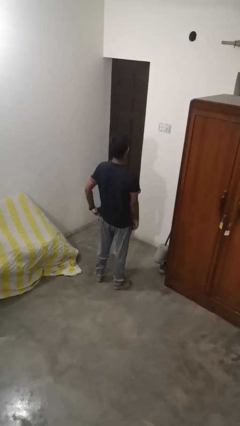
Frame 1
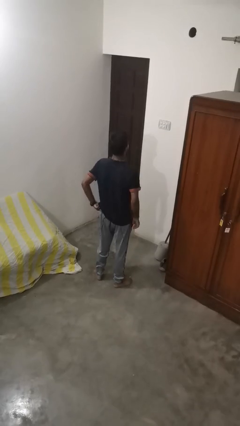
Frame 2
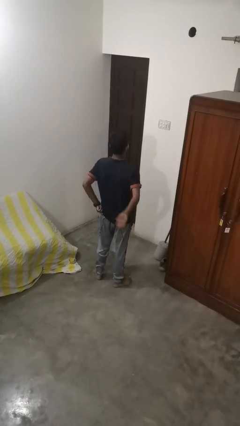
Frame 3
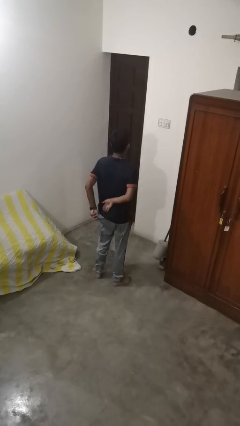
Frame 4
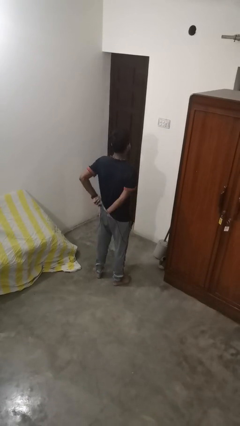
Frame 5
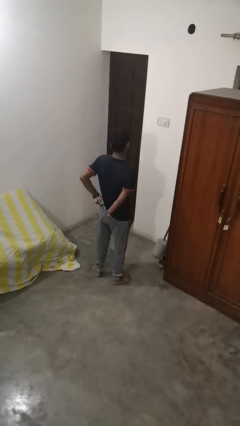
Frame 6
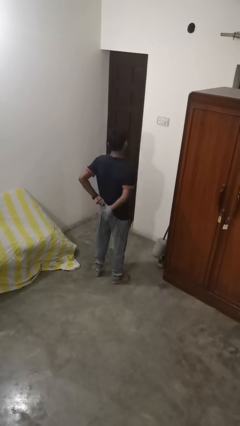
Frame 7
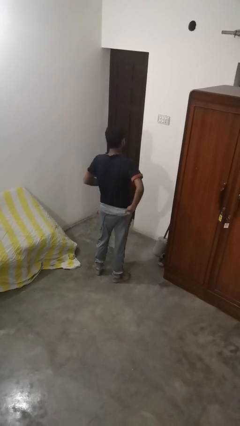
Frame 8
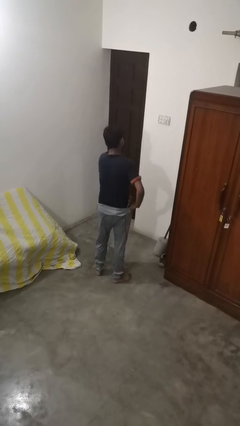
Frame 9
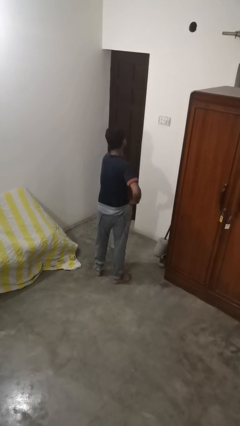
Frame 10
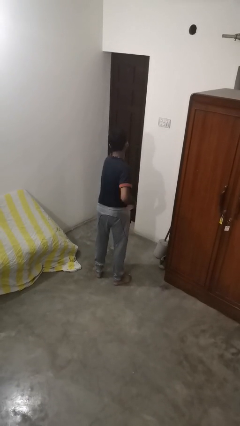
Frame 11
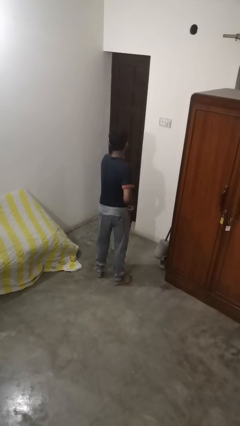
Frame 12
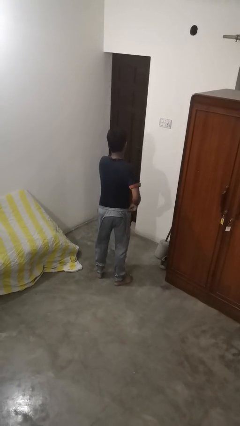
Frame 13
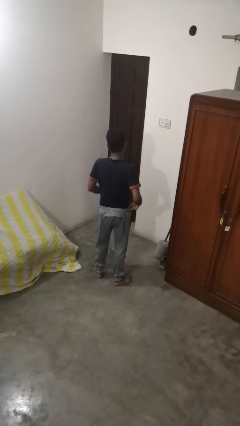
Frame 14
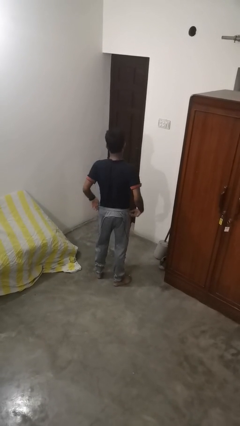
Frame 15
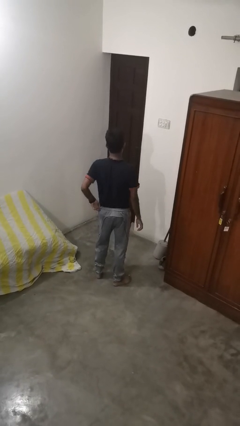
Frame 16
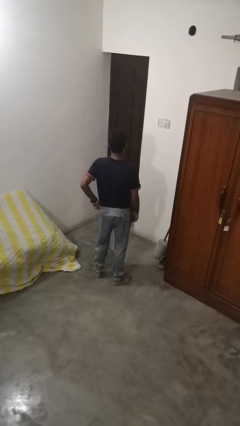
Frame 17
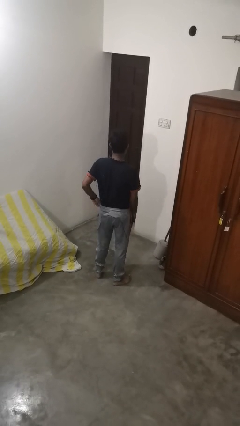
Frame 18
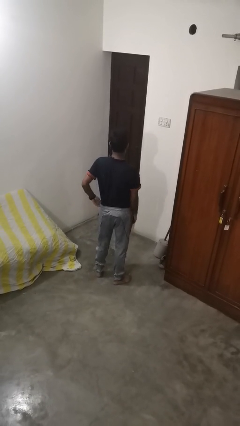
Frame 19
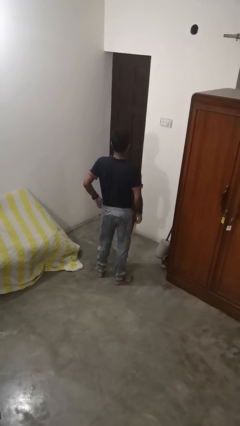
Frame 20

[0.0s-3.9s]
person tucks in shirt

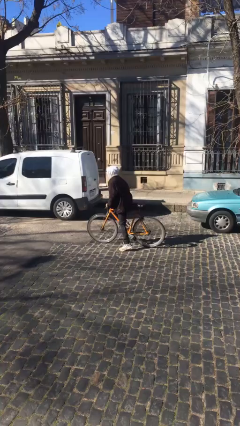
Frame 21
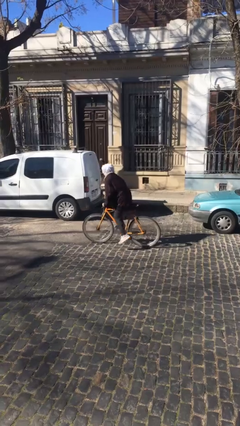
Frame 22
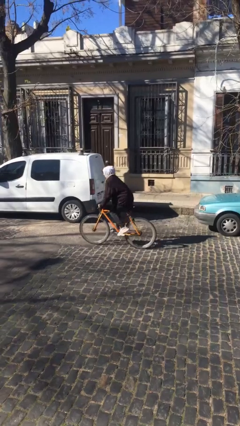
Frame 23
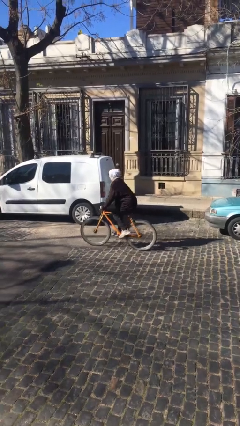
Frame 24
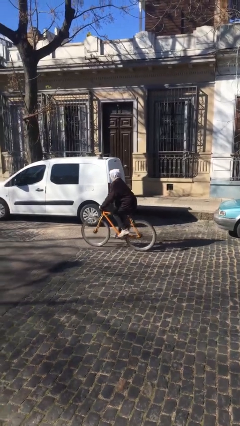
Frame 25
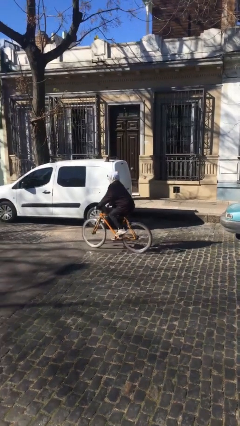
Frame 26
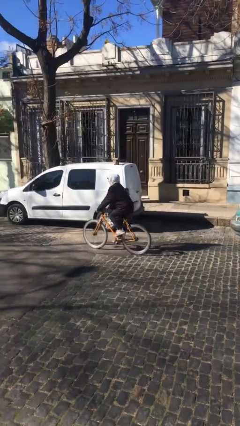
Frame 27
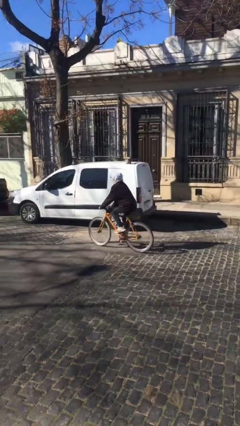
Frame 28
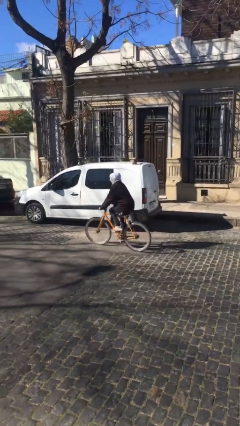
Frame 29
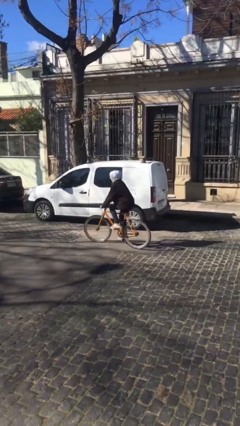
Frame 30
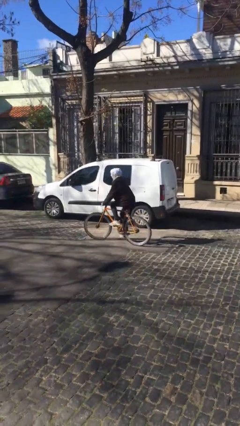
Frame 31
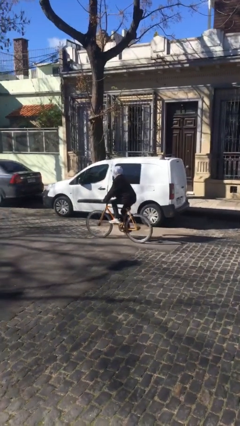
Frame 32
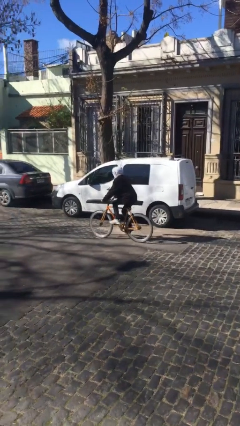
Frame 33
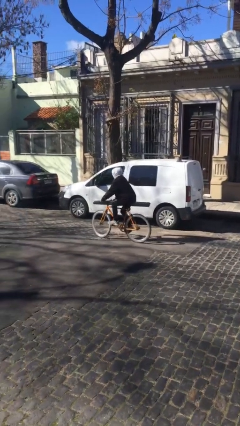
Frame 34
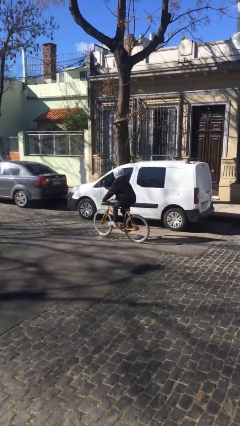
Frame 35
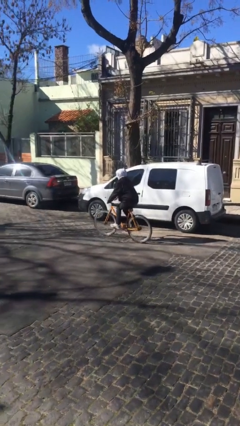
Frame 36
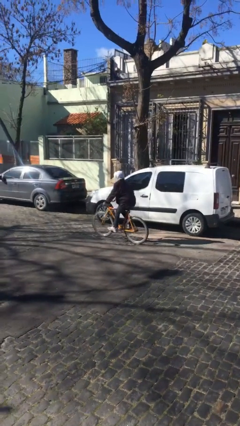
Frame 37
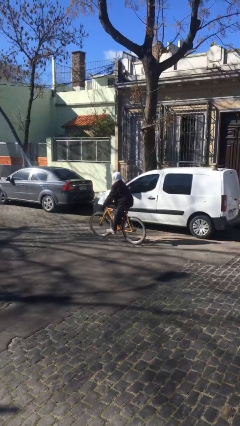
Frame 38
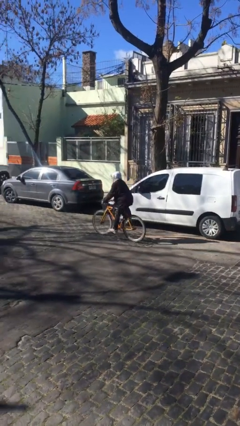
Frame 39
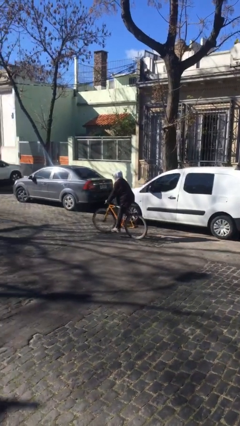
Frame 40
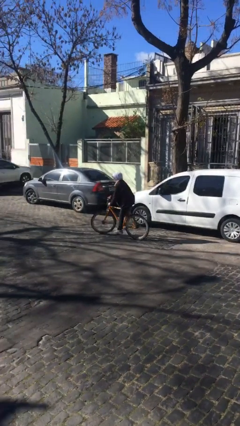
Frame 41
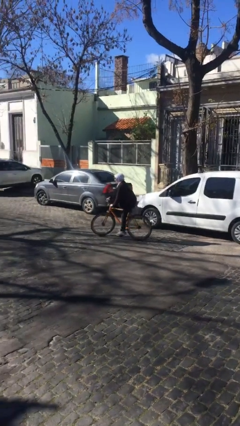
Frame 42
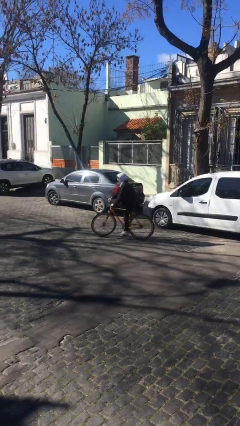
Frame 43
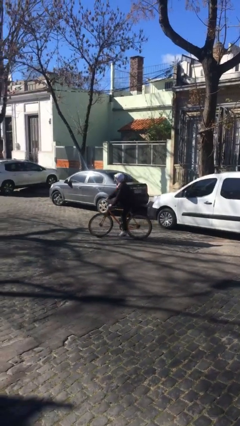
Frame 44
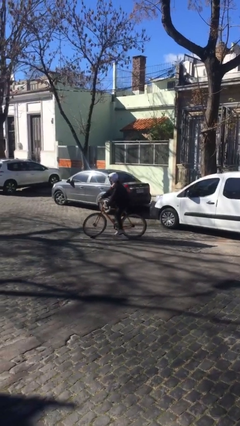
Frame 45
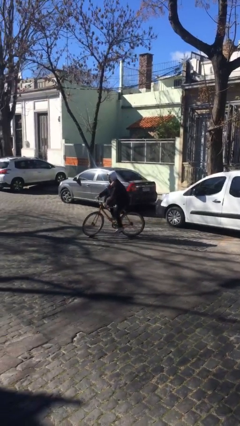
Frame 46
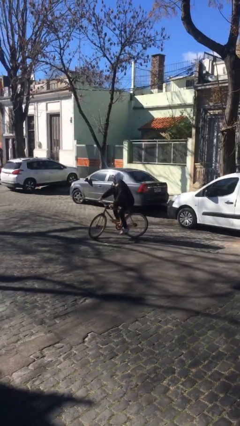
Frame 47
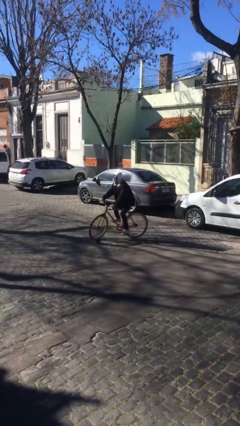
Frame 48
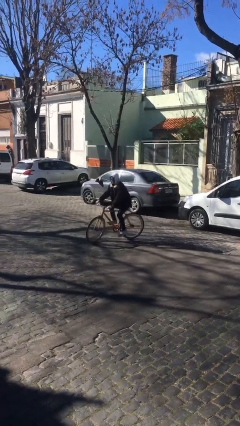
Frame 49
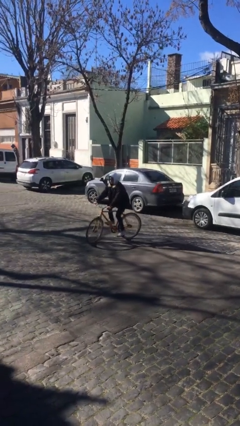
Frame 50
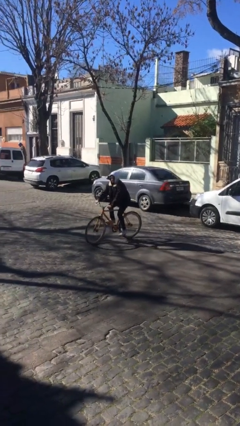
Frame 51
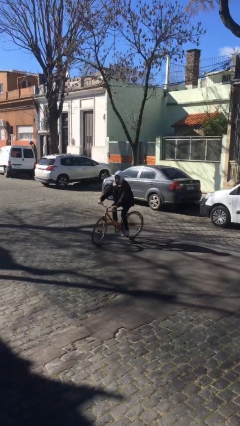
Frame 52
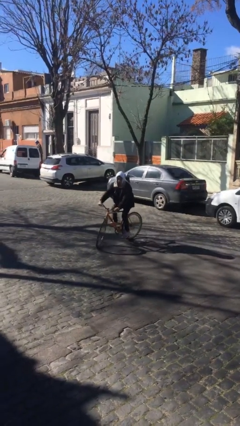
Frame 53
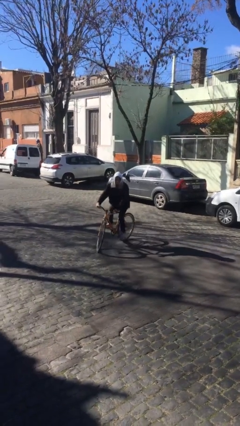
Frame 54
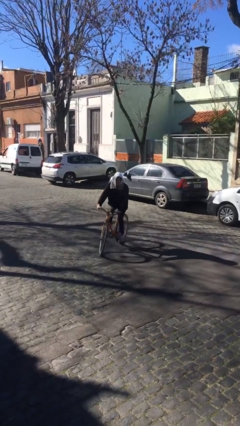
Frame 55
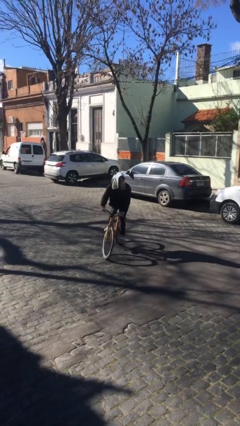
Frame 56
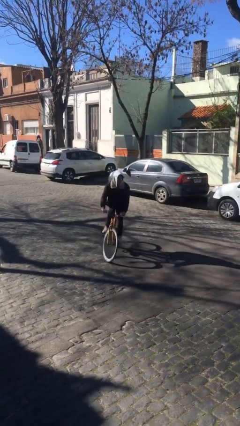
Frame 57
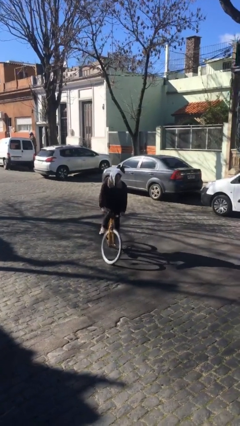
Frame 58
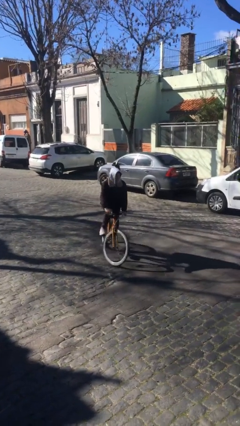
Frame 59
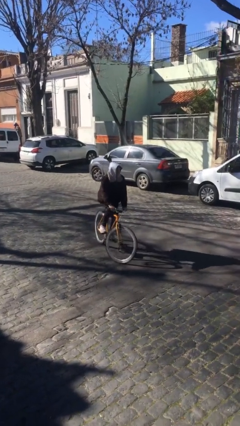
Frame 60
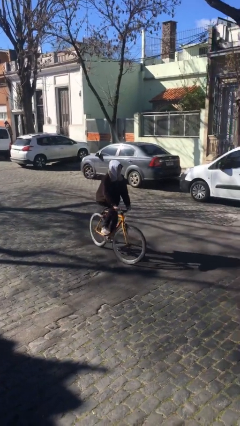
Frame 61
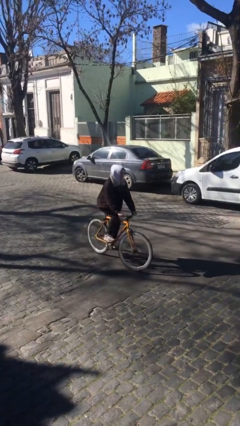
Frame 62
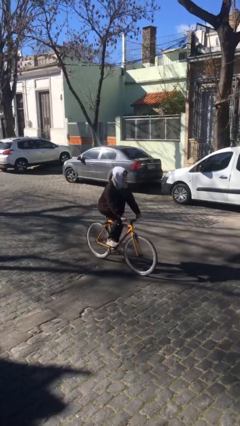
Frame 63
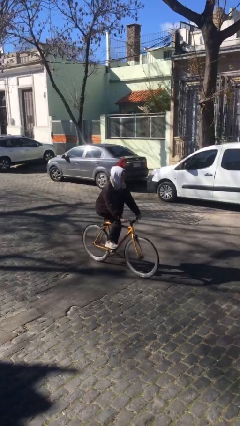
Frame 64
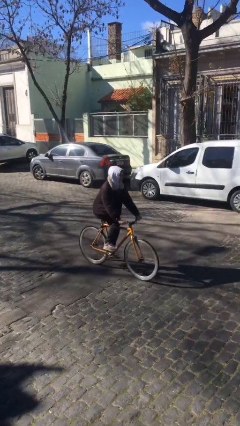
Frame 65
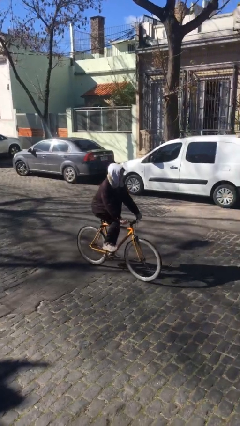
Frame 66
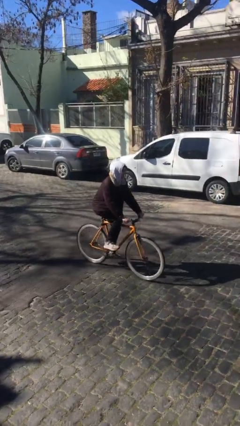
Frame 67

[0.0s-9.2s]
person rides bicycle

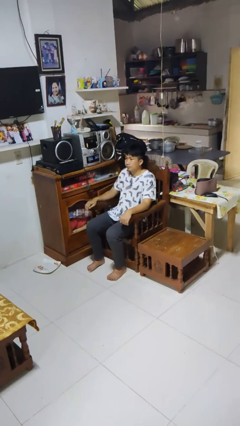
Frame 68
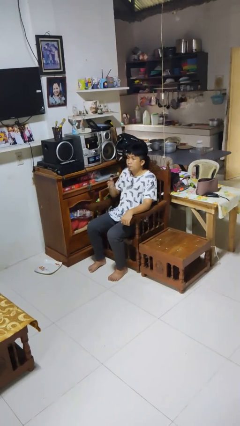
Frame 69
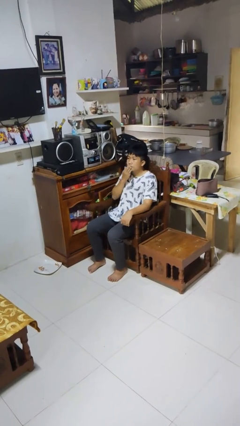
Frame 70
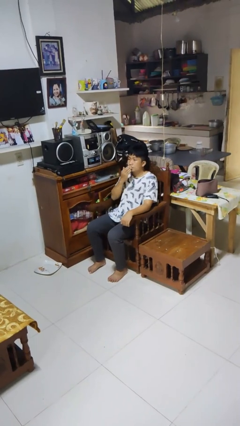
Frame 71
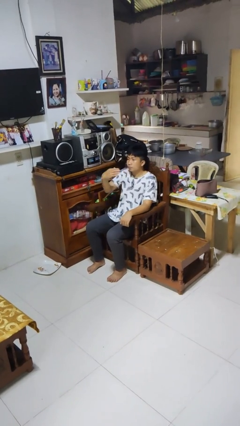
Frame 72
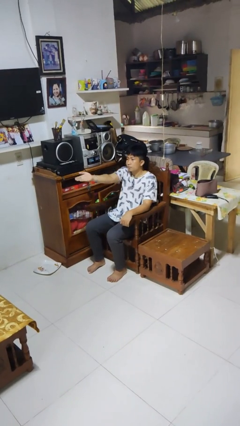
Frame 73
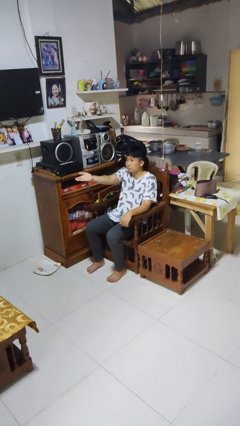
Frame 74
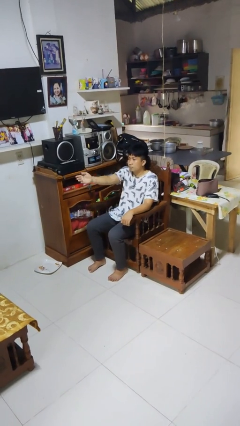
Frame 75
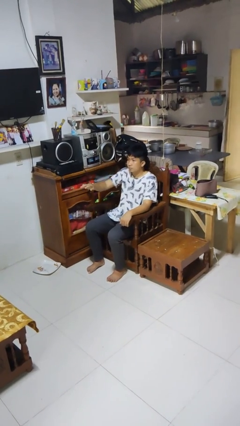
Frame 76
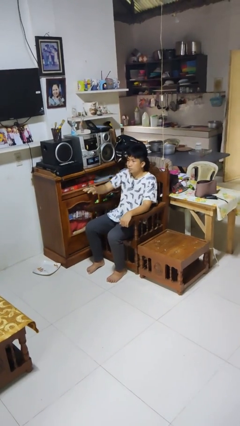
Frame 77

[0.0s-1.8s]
person gestures blow kiss

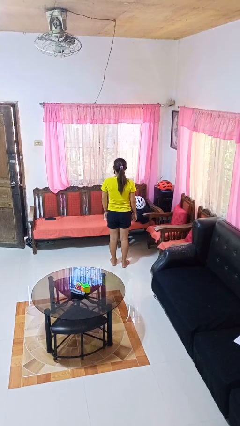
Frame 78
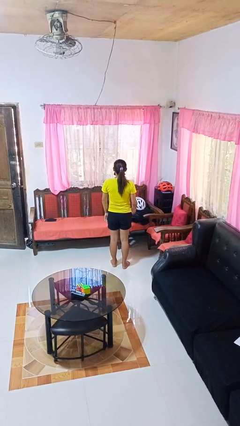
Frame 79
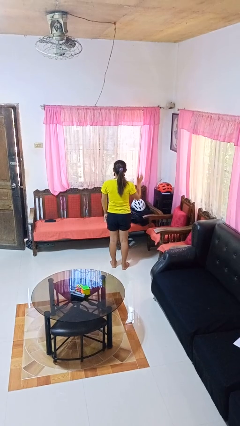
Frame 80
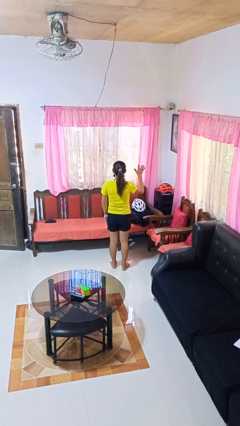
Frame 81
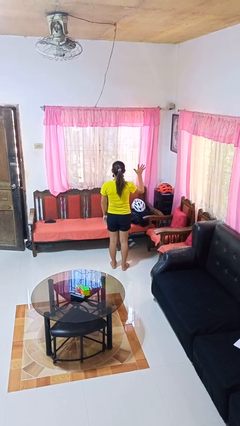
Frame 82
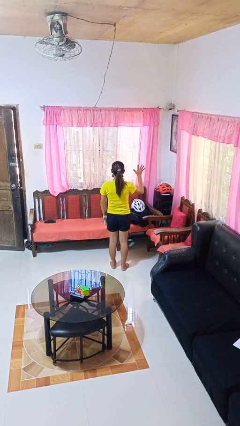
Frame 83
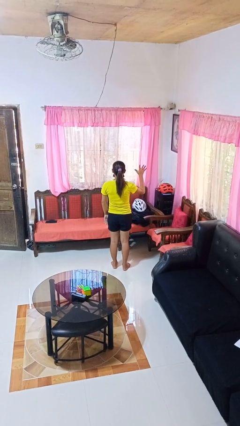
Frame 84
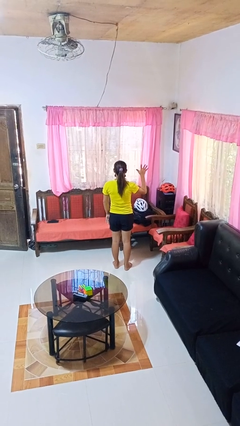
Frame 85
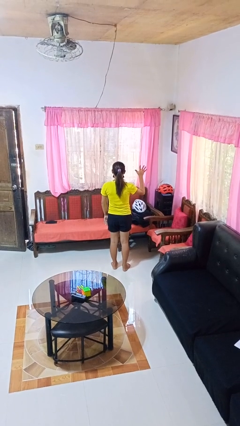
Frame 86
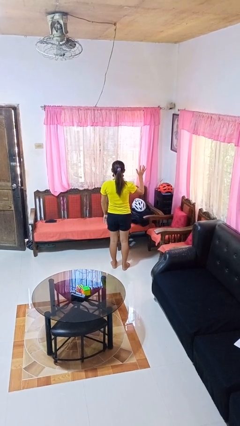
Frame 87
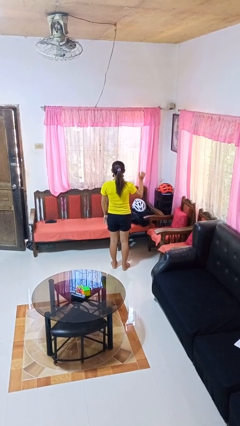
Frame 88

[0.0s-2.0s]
person gestures number five

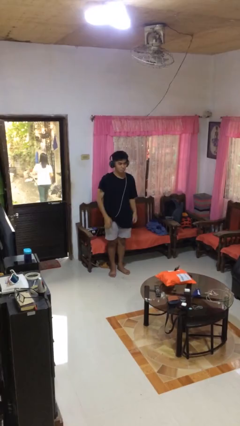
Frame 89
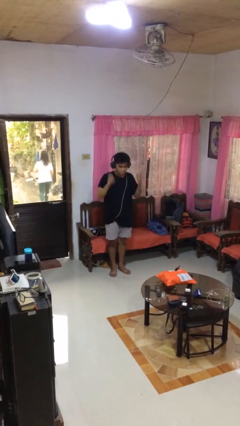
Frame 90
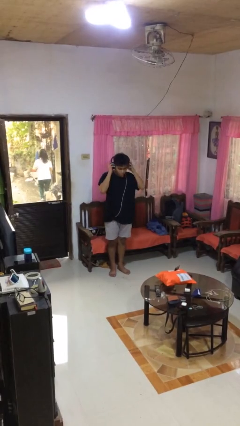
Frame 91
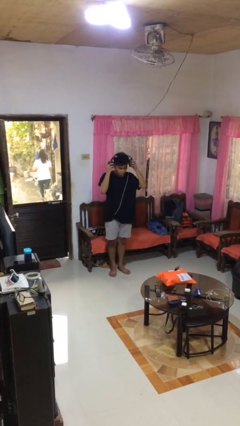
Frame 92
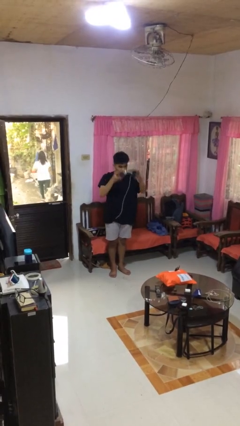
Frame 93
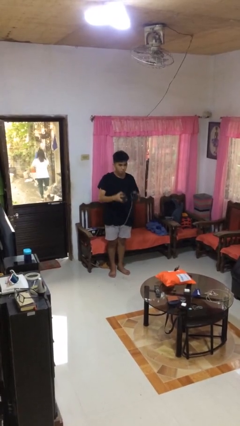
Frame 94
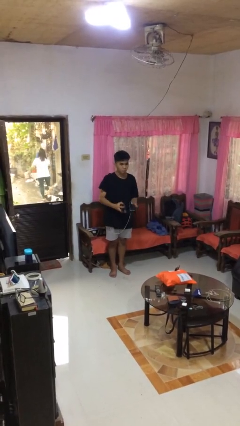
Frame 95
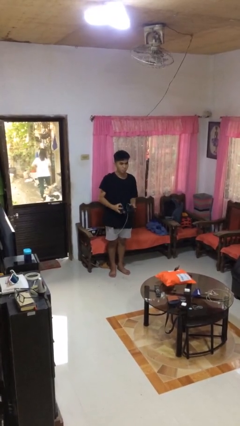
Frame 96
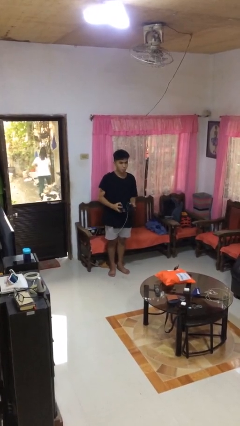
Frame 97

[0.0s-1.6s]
person takes off headphones
